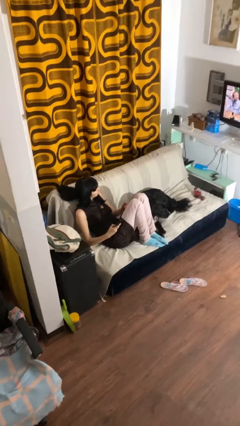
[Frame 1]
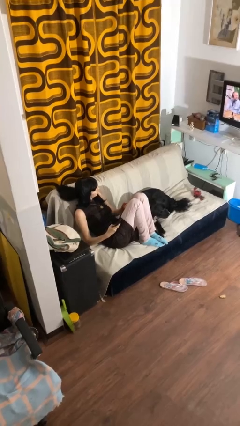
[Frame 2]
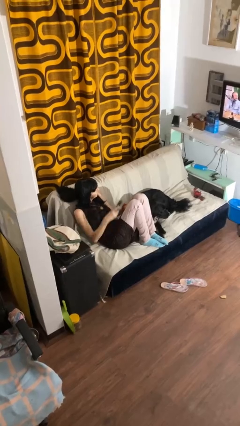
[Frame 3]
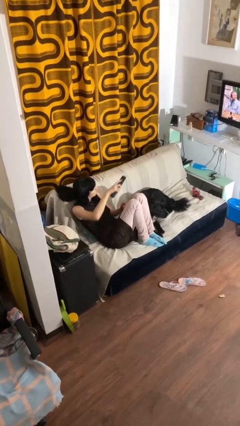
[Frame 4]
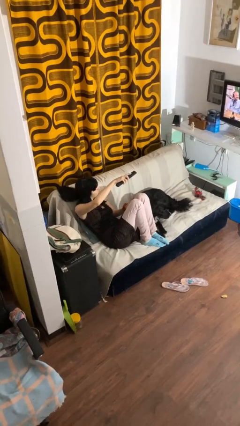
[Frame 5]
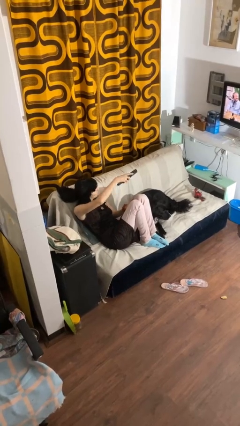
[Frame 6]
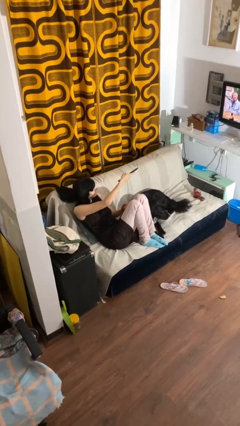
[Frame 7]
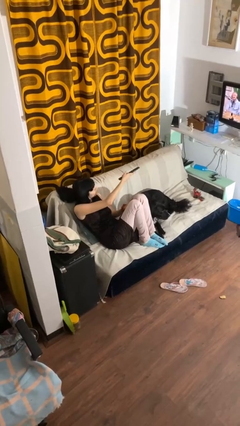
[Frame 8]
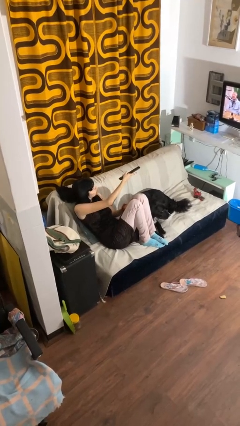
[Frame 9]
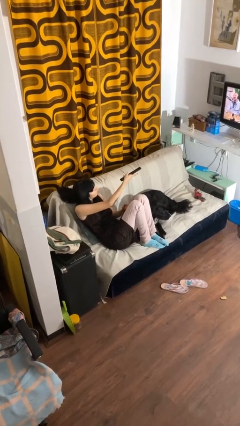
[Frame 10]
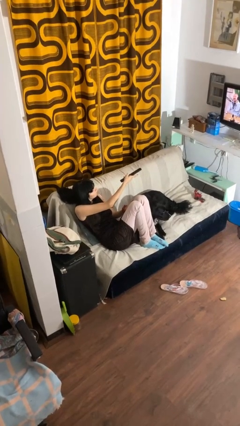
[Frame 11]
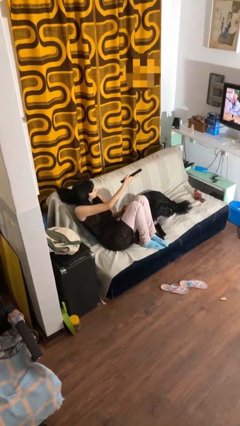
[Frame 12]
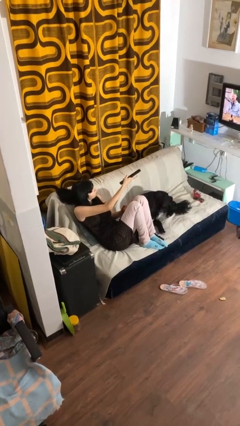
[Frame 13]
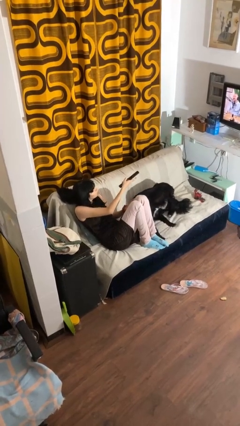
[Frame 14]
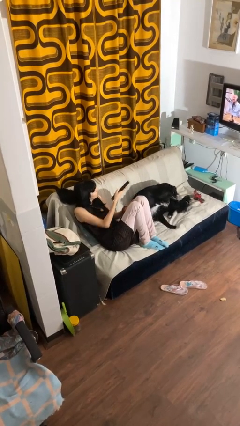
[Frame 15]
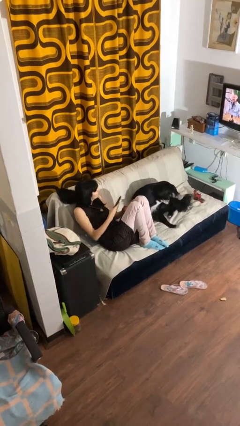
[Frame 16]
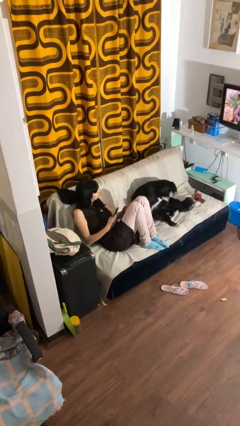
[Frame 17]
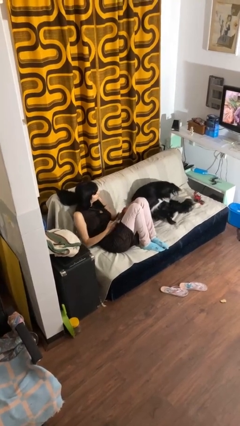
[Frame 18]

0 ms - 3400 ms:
person uses television remote

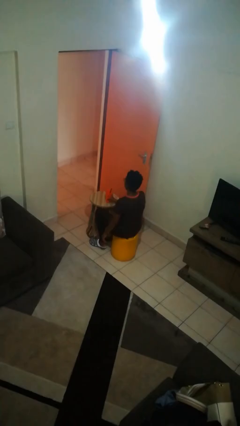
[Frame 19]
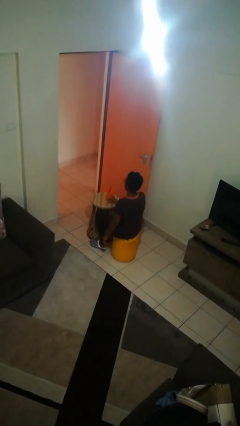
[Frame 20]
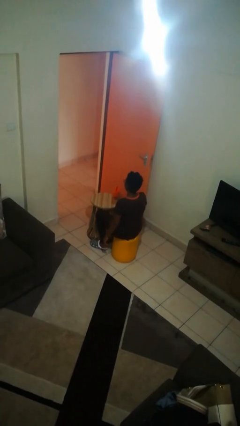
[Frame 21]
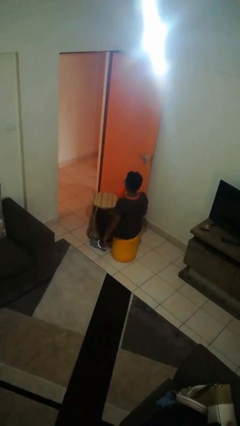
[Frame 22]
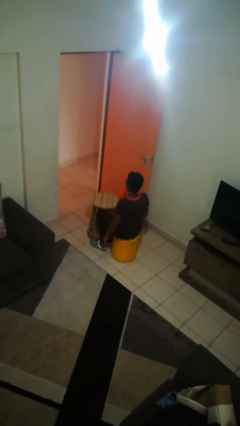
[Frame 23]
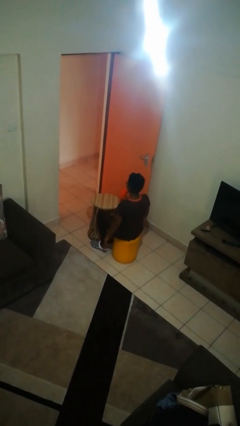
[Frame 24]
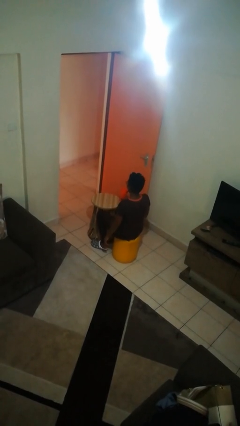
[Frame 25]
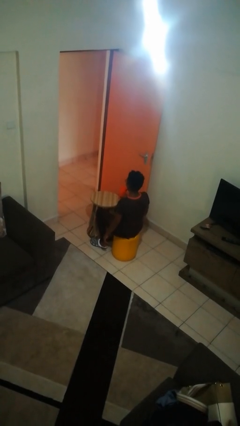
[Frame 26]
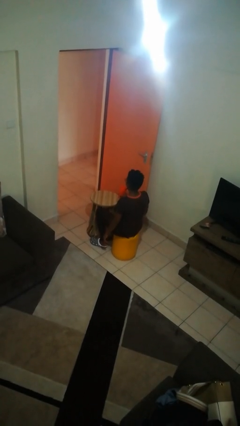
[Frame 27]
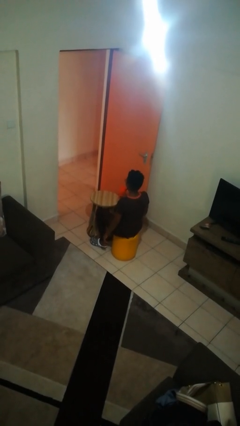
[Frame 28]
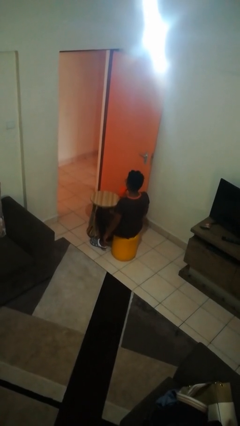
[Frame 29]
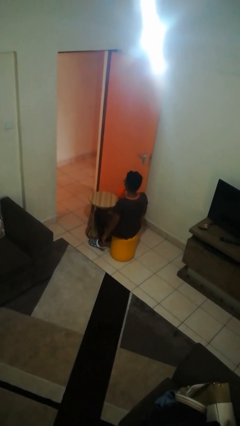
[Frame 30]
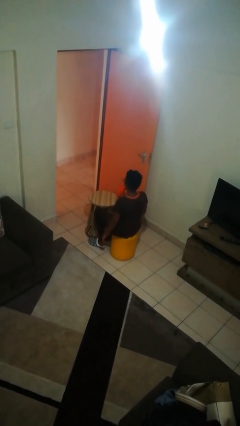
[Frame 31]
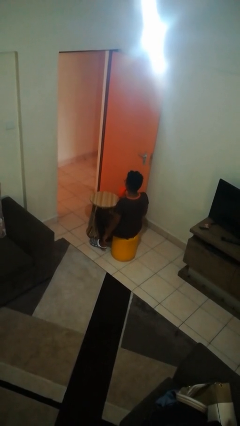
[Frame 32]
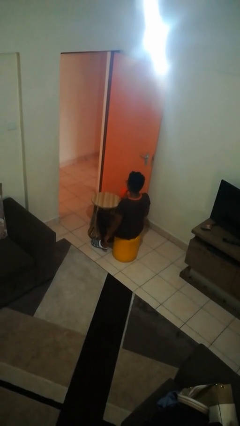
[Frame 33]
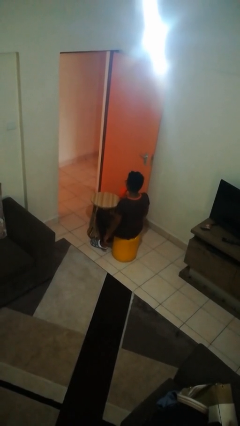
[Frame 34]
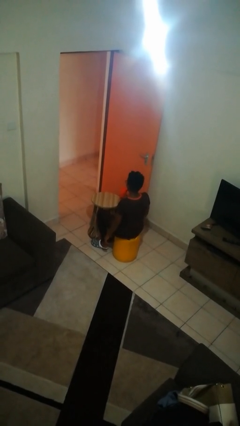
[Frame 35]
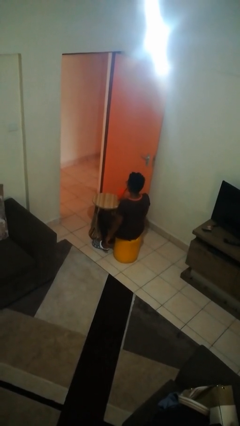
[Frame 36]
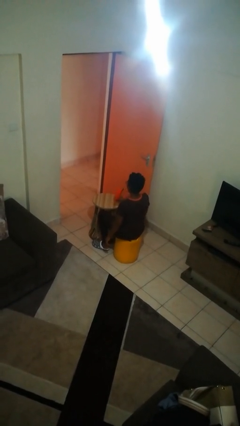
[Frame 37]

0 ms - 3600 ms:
person drinks from straw

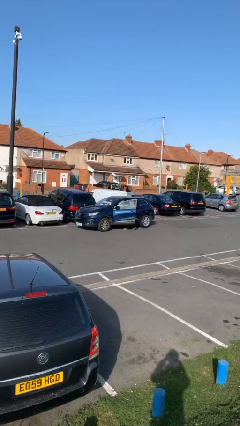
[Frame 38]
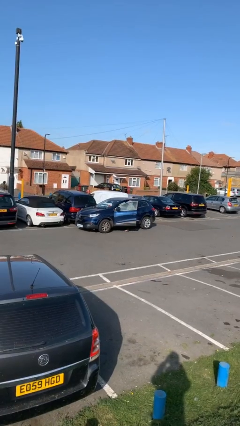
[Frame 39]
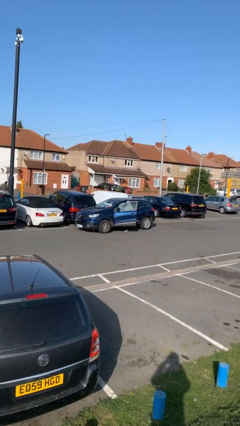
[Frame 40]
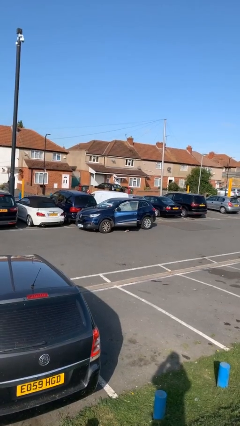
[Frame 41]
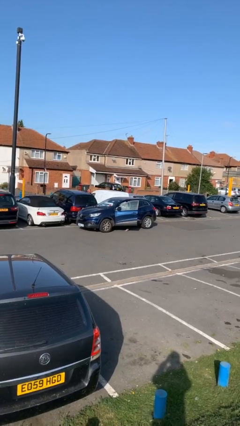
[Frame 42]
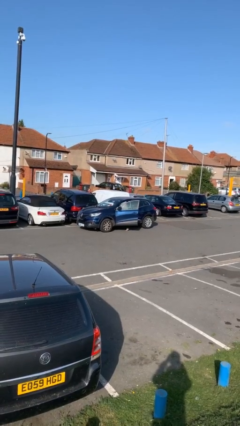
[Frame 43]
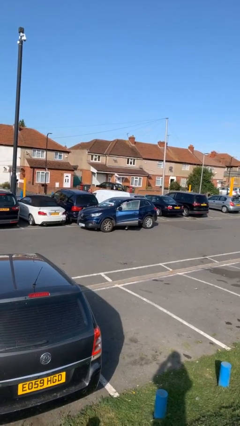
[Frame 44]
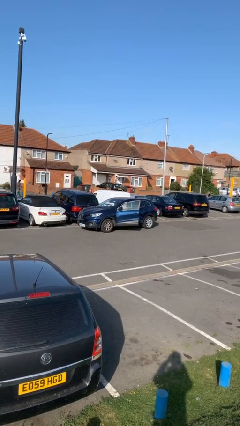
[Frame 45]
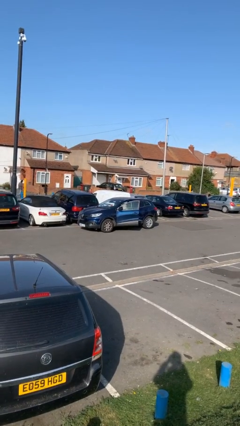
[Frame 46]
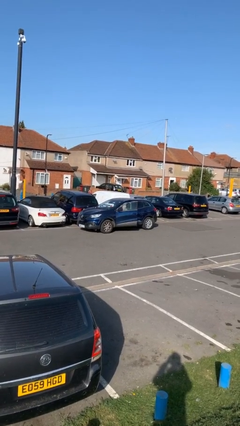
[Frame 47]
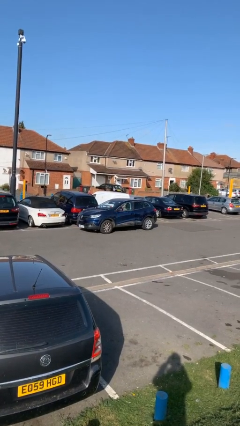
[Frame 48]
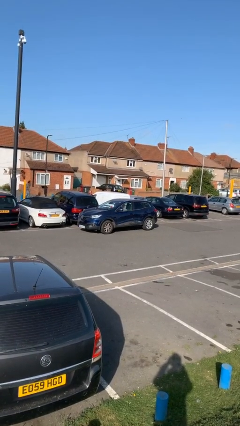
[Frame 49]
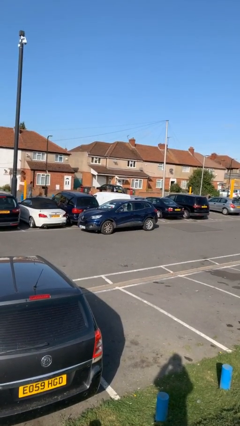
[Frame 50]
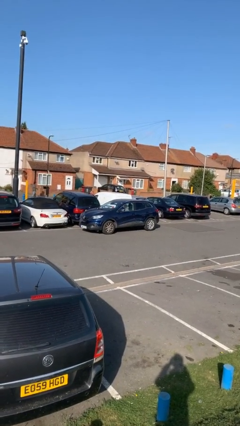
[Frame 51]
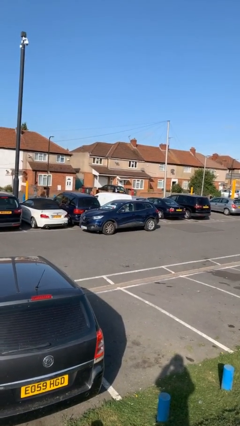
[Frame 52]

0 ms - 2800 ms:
car picks up person

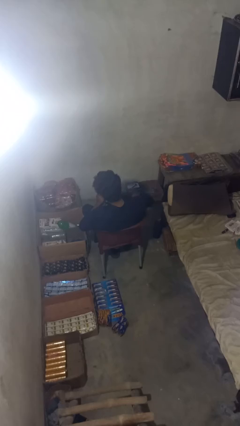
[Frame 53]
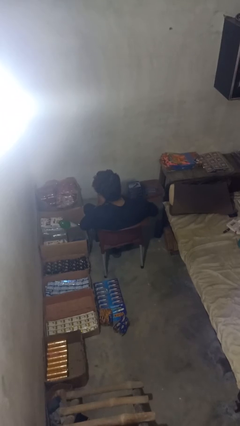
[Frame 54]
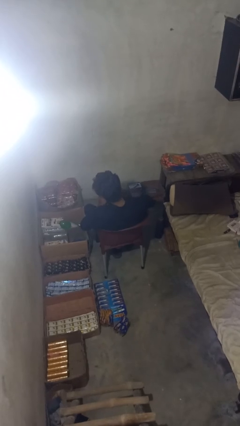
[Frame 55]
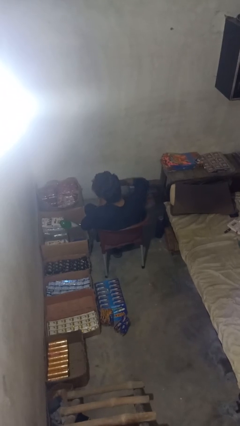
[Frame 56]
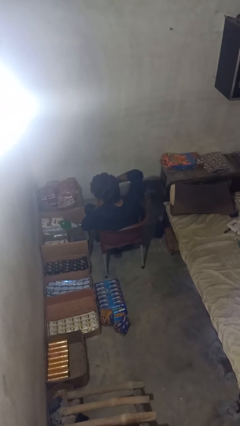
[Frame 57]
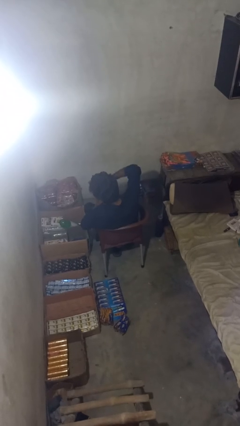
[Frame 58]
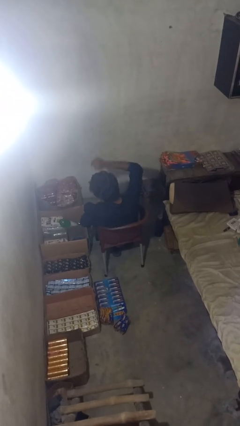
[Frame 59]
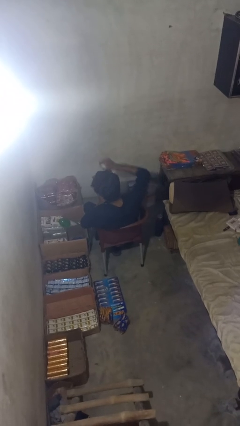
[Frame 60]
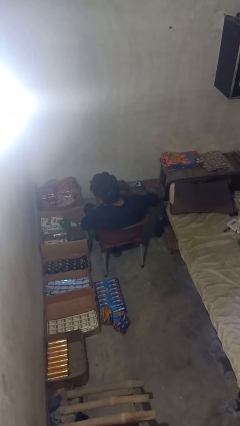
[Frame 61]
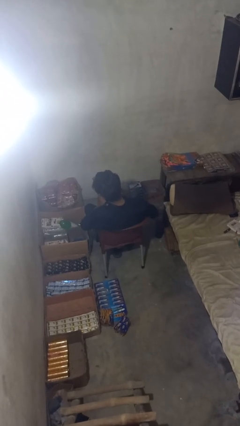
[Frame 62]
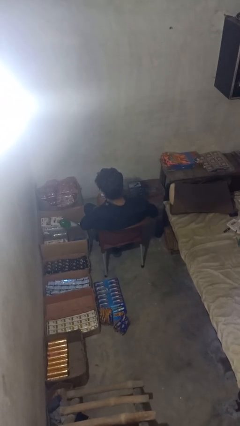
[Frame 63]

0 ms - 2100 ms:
person opens can with can opener

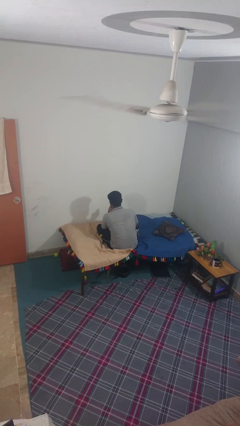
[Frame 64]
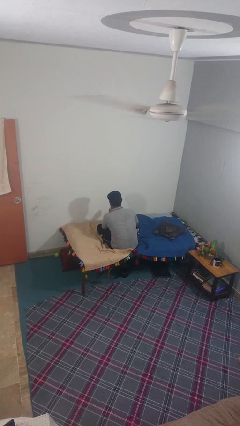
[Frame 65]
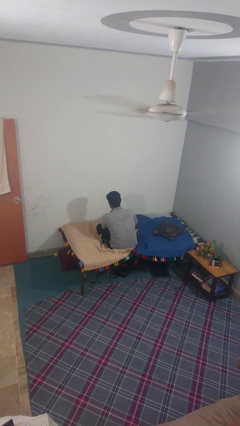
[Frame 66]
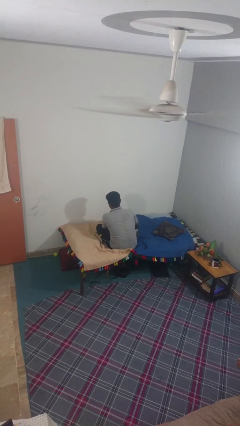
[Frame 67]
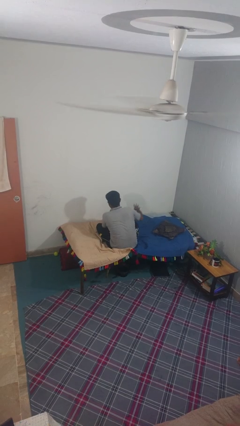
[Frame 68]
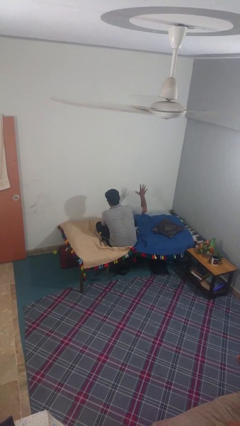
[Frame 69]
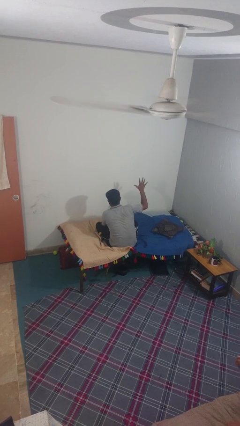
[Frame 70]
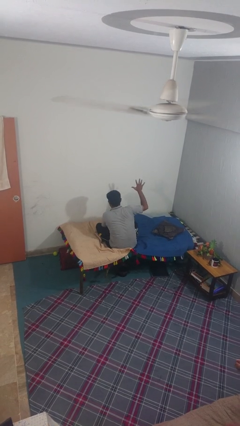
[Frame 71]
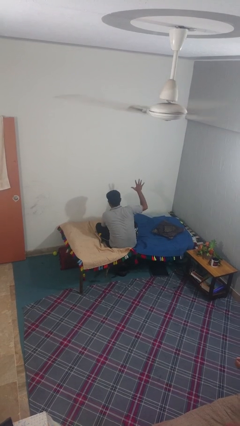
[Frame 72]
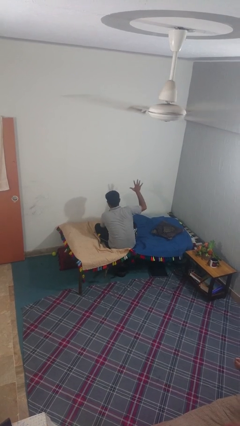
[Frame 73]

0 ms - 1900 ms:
person gestures number five

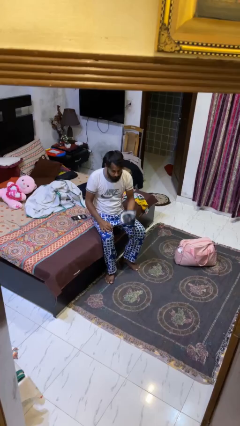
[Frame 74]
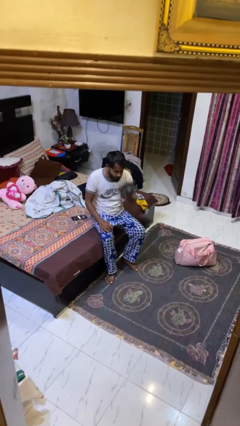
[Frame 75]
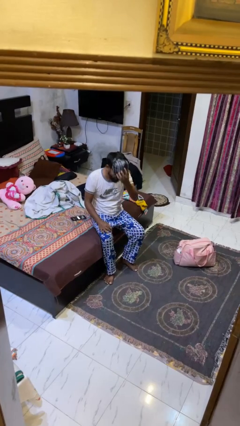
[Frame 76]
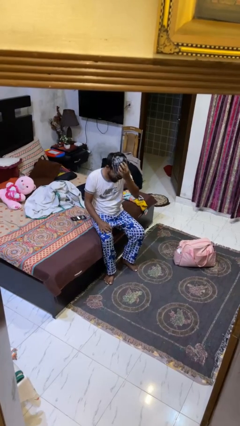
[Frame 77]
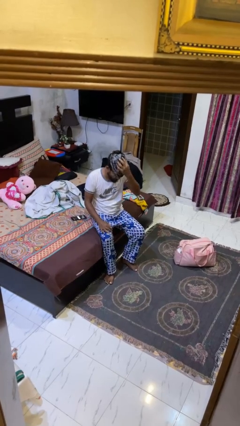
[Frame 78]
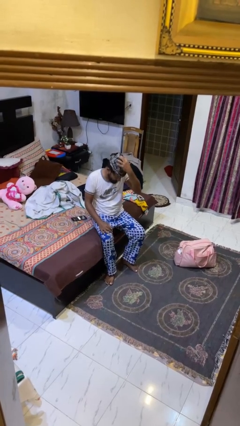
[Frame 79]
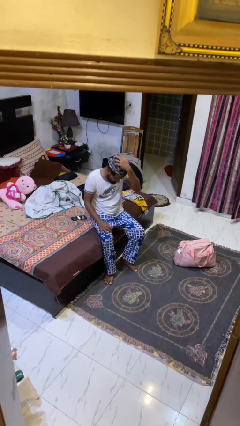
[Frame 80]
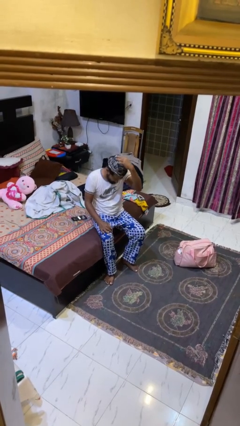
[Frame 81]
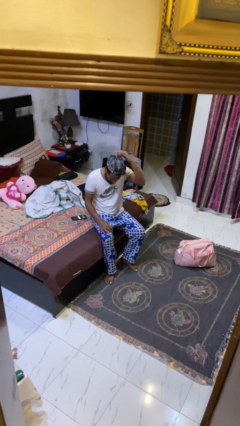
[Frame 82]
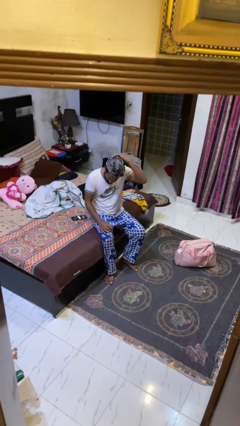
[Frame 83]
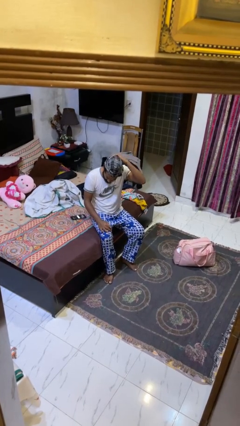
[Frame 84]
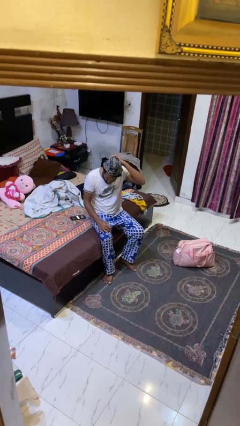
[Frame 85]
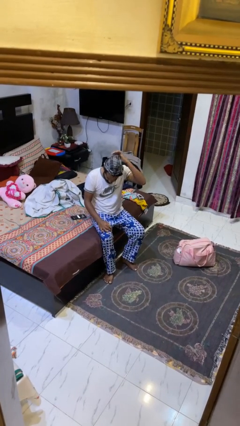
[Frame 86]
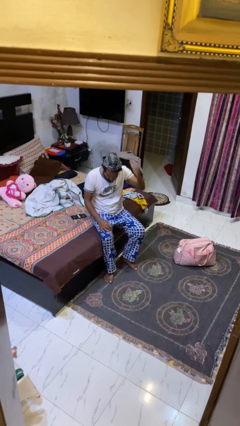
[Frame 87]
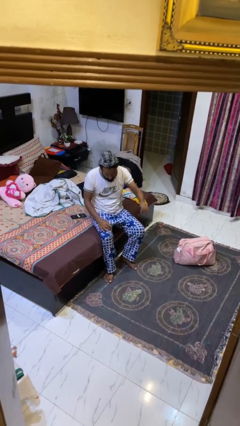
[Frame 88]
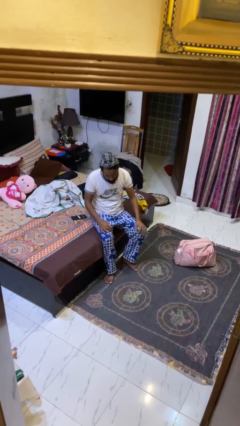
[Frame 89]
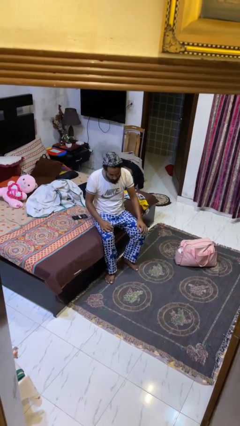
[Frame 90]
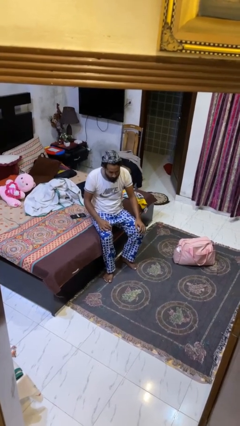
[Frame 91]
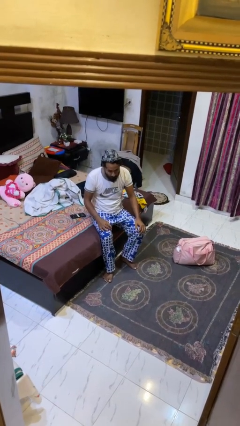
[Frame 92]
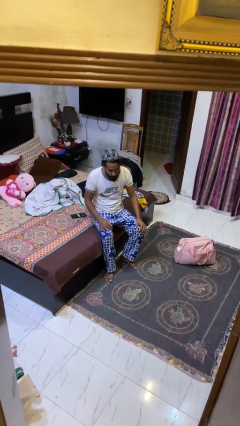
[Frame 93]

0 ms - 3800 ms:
person puts on hat

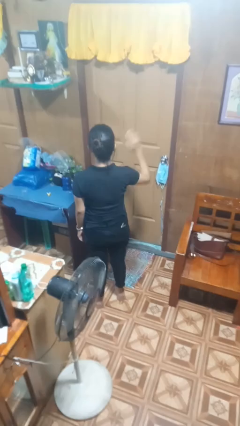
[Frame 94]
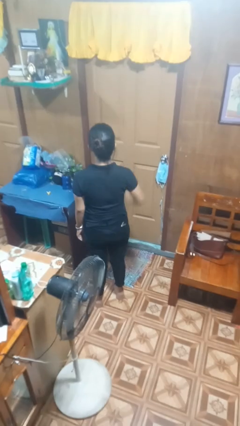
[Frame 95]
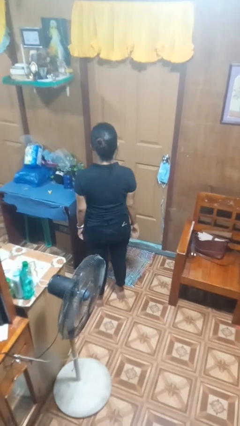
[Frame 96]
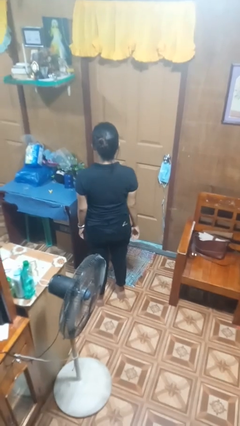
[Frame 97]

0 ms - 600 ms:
person gestures lower hand
